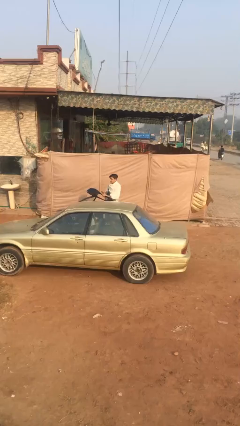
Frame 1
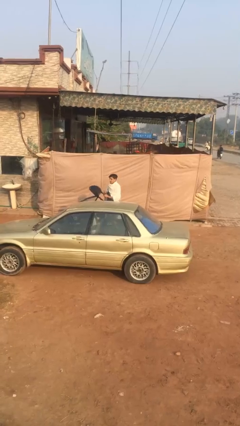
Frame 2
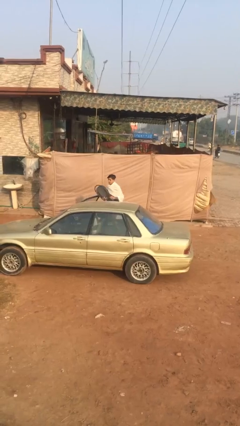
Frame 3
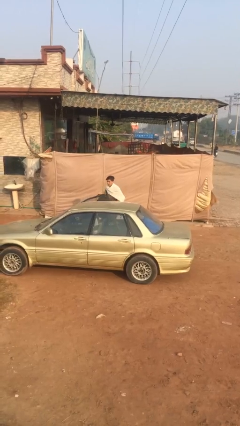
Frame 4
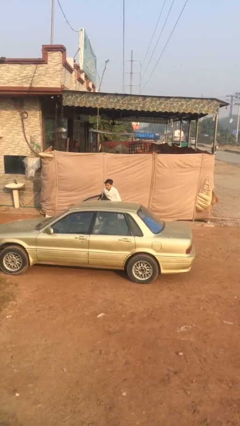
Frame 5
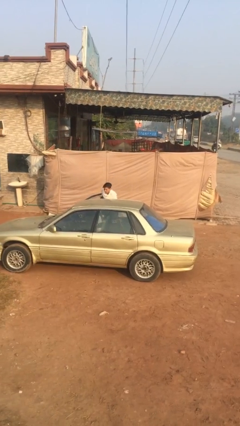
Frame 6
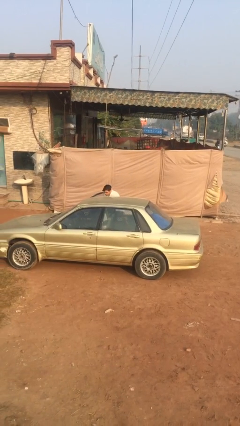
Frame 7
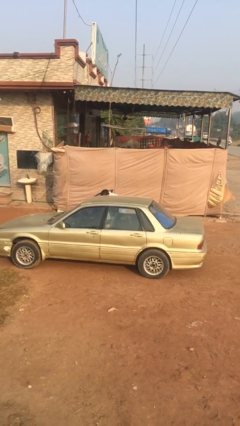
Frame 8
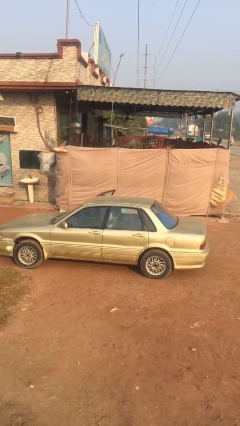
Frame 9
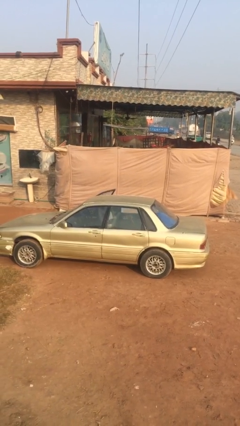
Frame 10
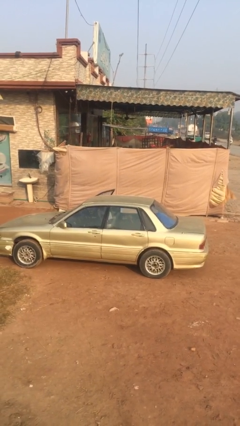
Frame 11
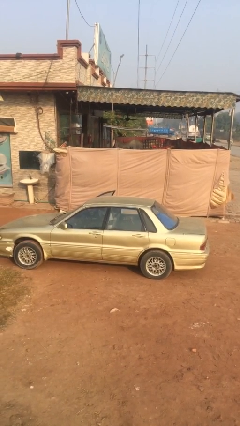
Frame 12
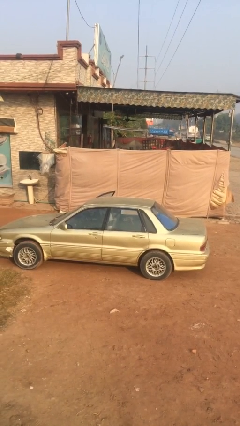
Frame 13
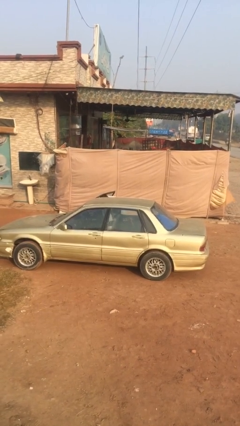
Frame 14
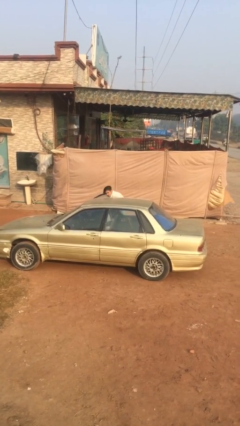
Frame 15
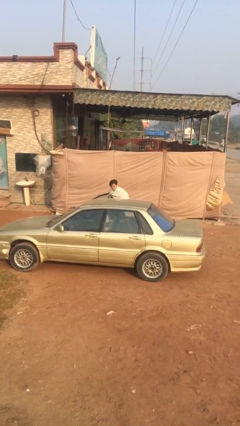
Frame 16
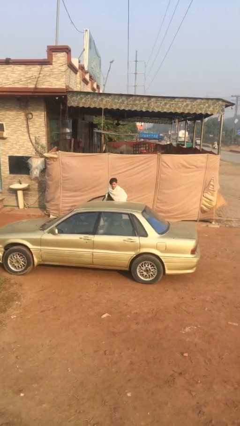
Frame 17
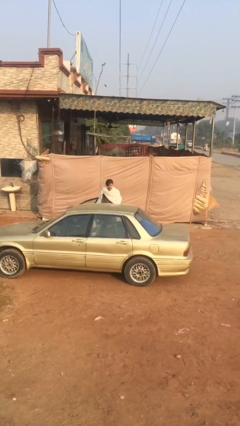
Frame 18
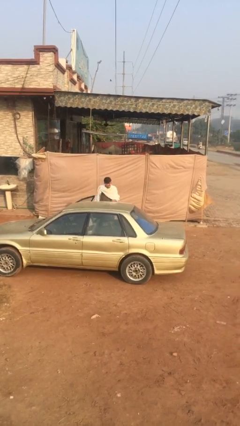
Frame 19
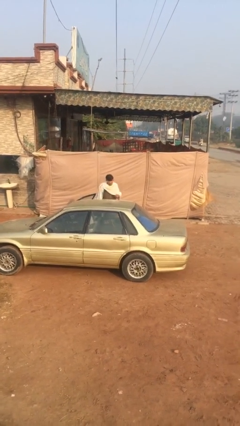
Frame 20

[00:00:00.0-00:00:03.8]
person loads car

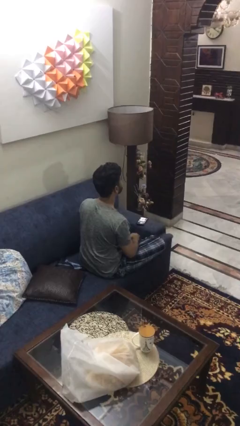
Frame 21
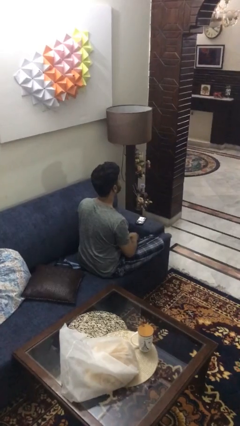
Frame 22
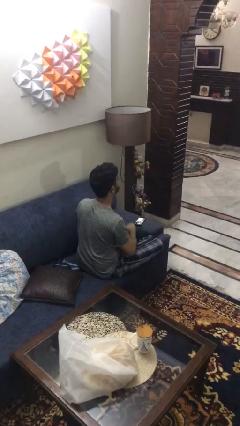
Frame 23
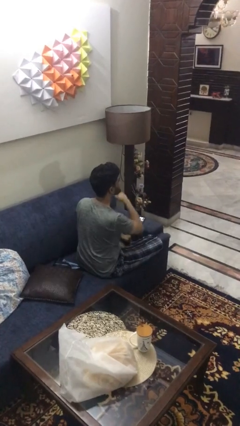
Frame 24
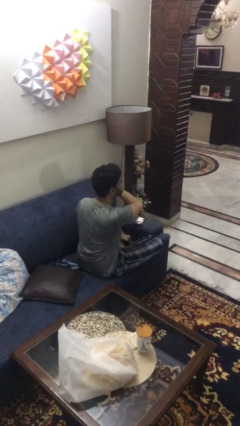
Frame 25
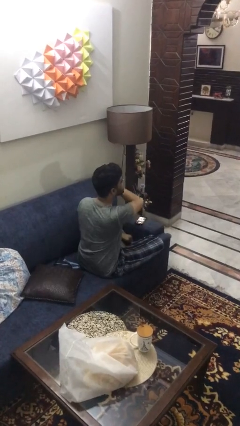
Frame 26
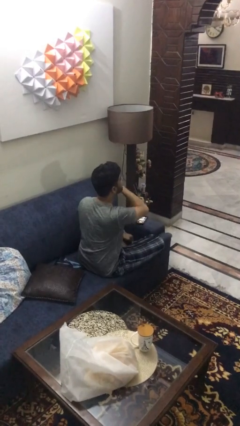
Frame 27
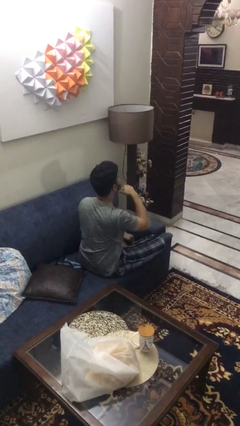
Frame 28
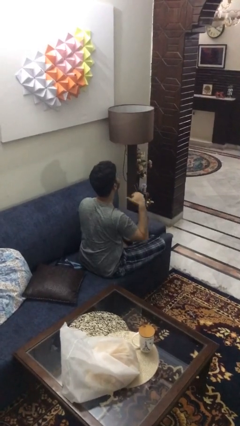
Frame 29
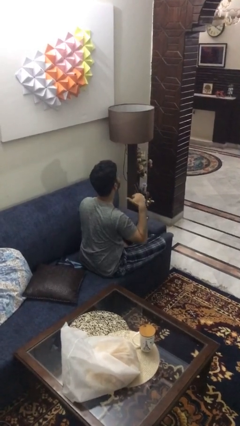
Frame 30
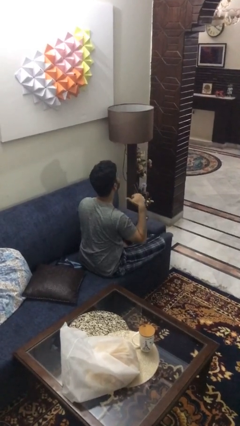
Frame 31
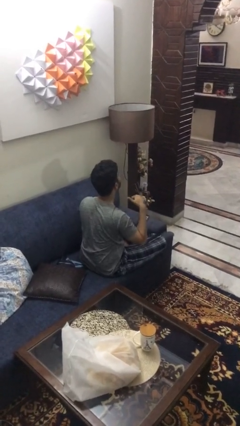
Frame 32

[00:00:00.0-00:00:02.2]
person gestures cut

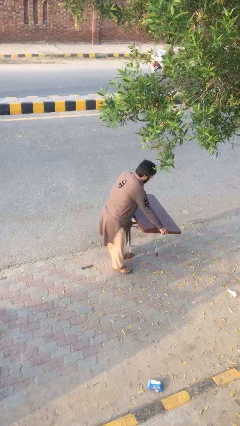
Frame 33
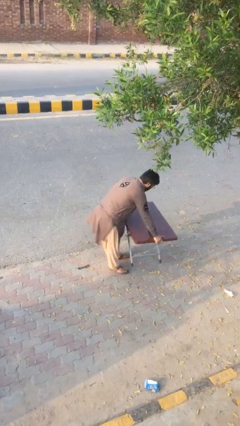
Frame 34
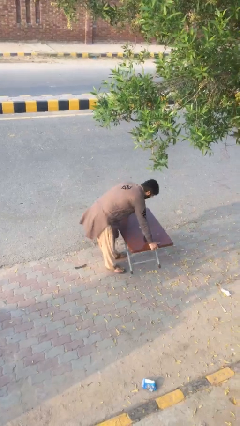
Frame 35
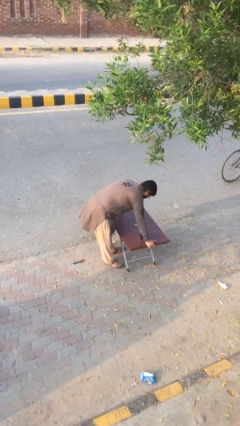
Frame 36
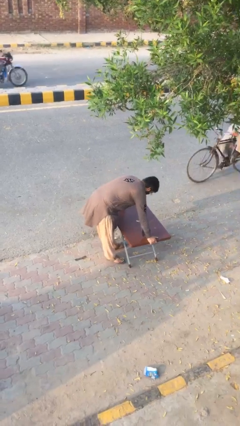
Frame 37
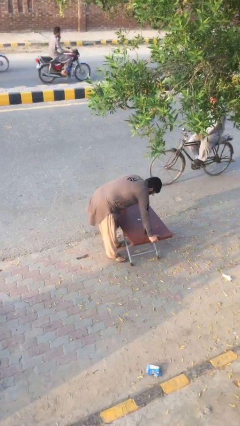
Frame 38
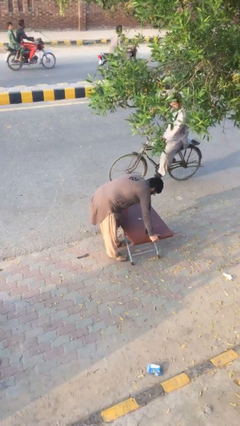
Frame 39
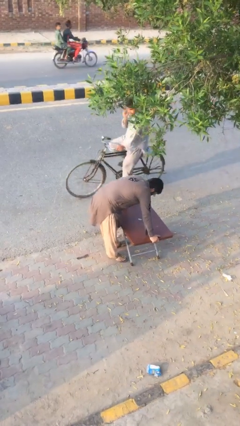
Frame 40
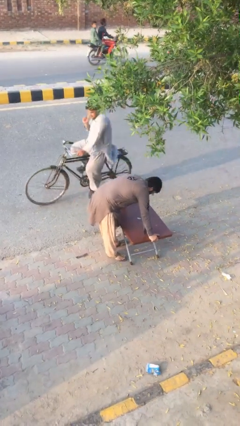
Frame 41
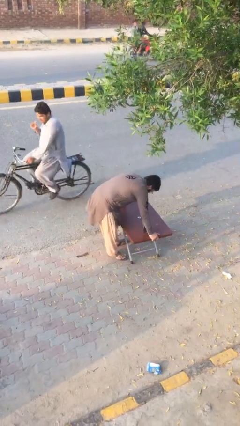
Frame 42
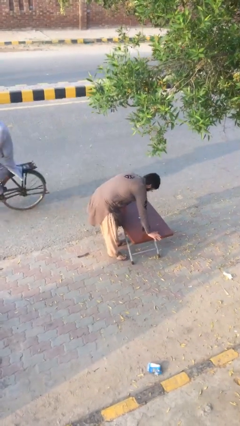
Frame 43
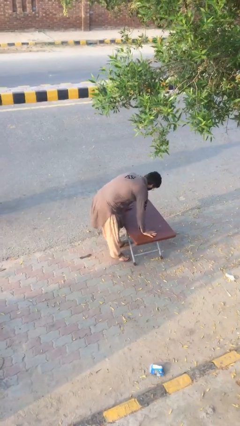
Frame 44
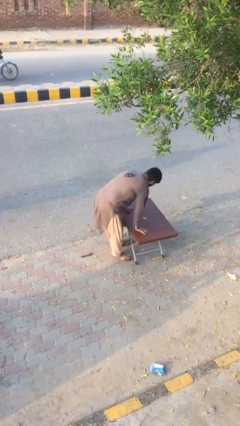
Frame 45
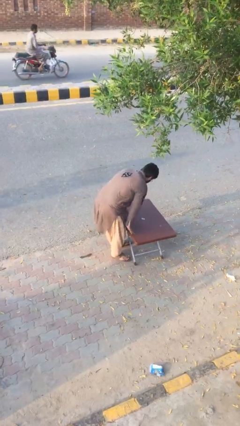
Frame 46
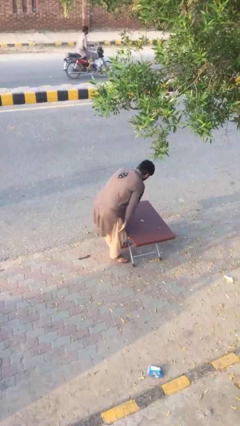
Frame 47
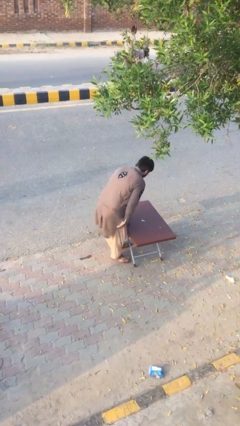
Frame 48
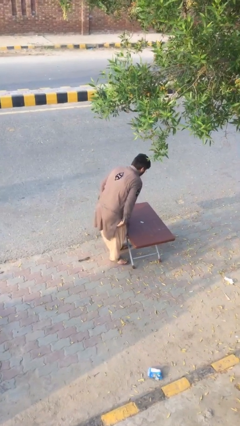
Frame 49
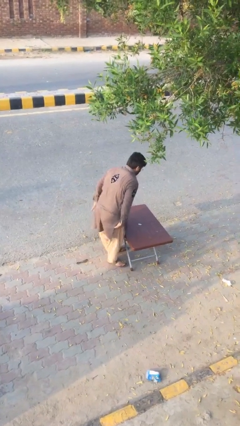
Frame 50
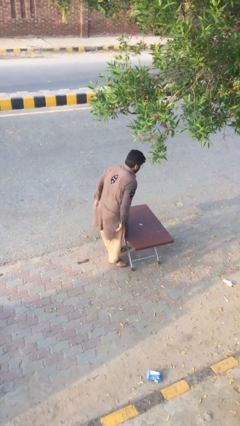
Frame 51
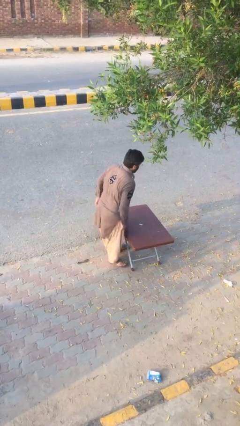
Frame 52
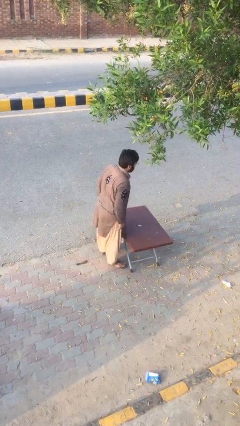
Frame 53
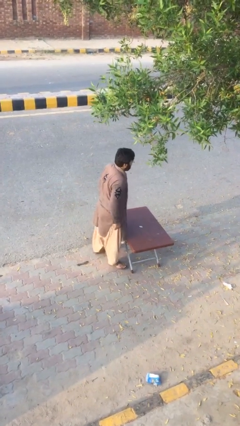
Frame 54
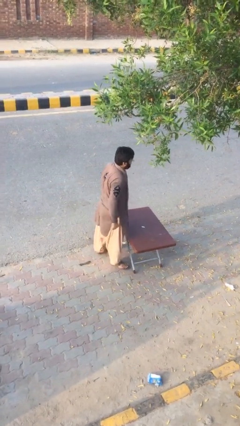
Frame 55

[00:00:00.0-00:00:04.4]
person puts down object on floor

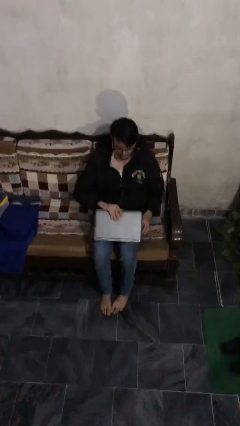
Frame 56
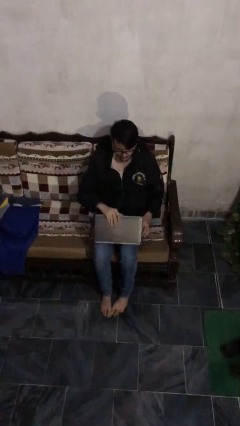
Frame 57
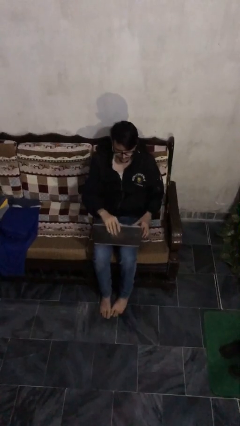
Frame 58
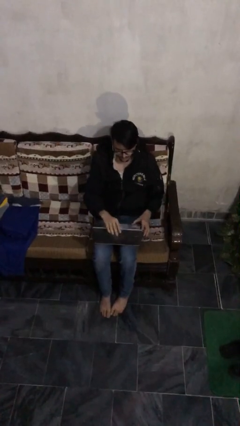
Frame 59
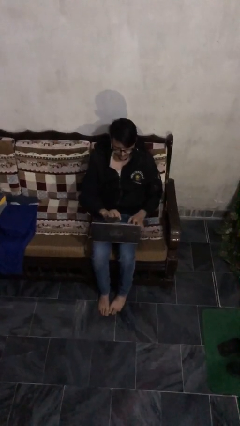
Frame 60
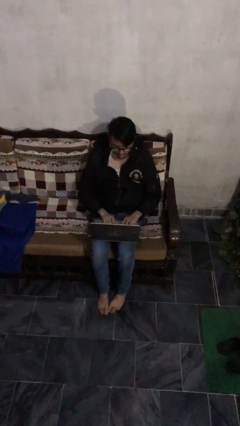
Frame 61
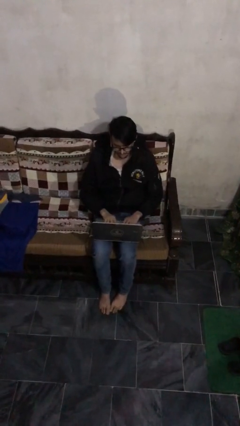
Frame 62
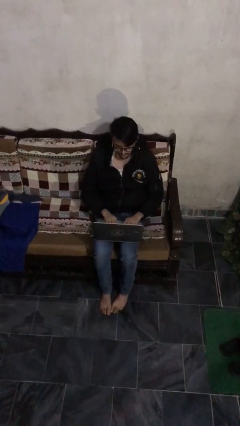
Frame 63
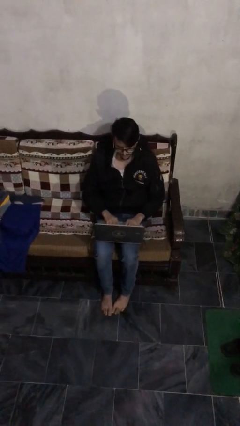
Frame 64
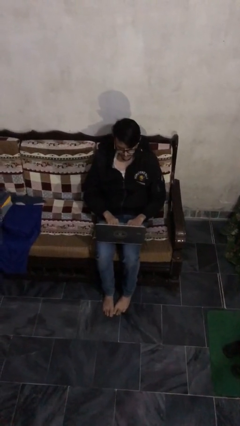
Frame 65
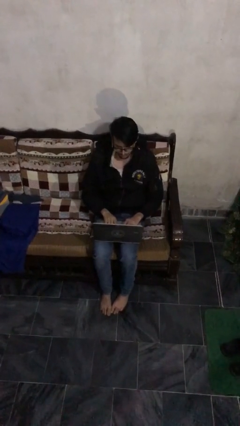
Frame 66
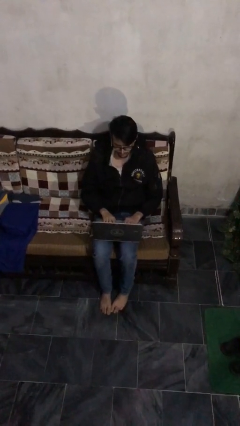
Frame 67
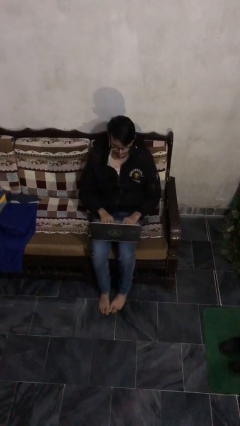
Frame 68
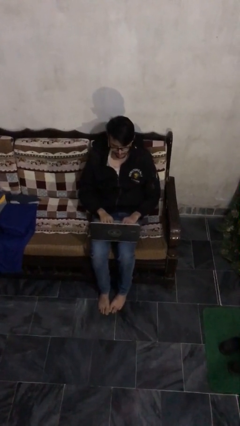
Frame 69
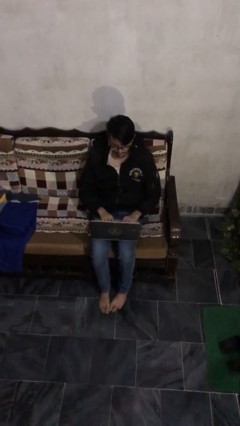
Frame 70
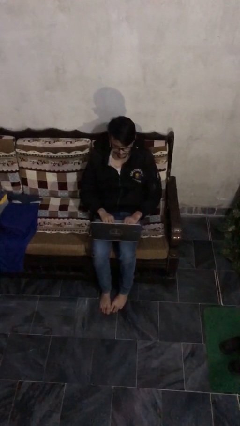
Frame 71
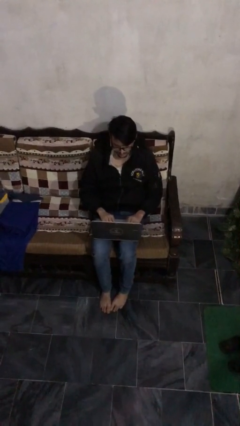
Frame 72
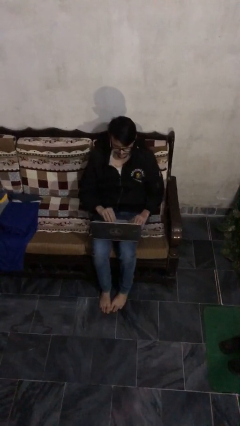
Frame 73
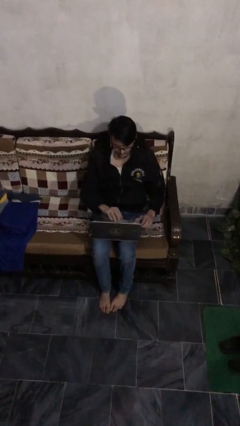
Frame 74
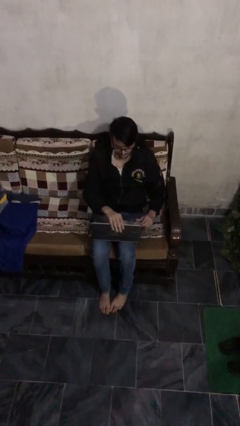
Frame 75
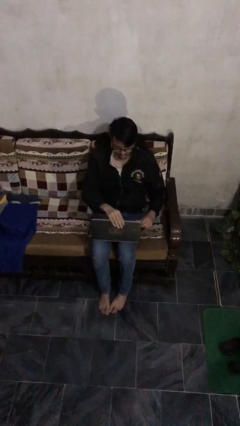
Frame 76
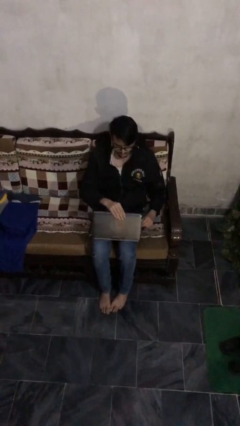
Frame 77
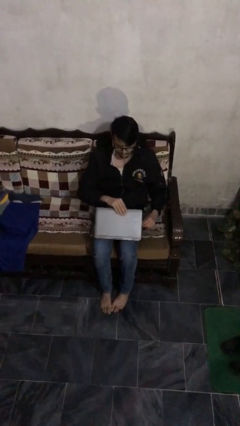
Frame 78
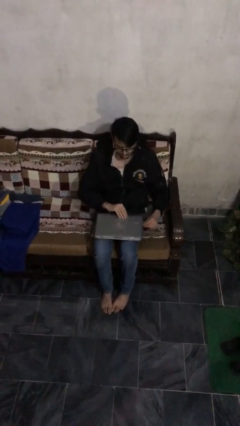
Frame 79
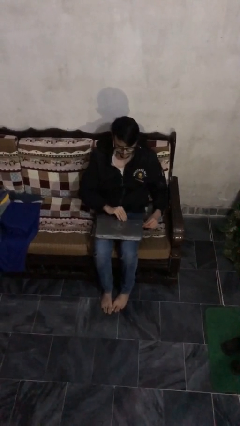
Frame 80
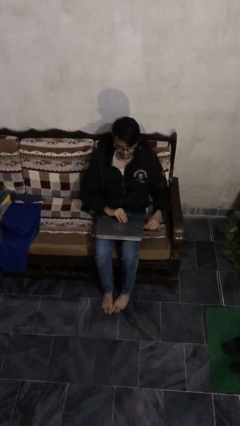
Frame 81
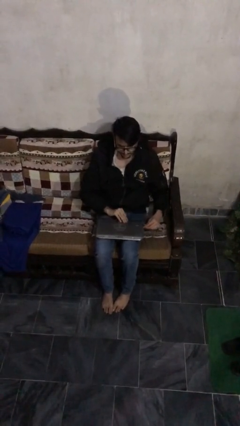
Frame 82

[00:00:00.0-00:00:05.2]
person interacts with laptop

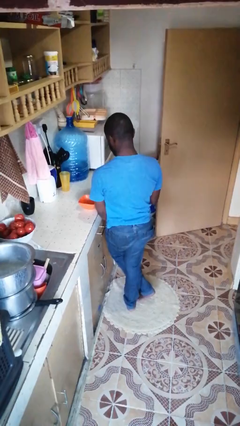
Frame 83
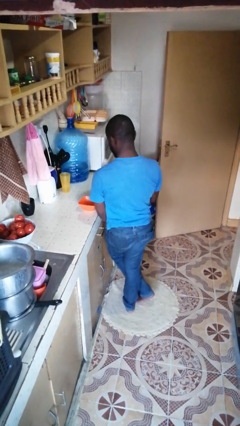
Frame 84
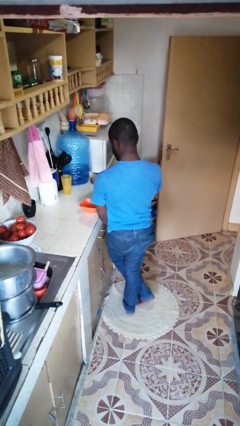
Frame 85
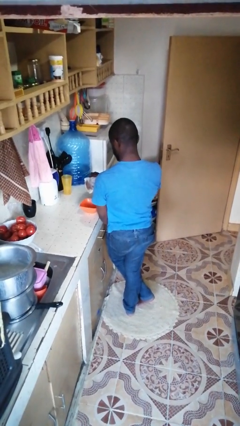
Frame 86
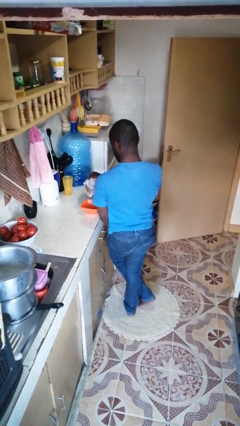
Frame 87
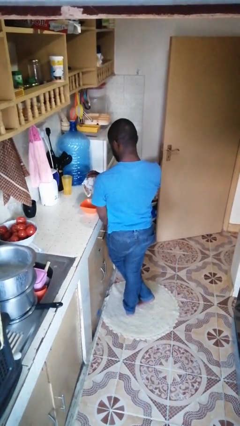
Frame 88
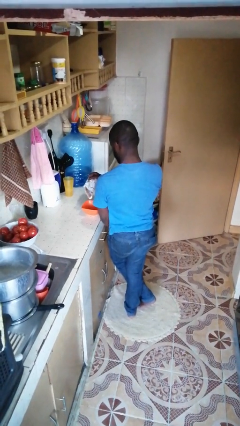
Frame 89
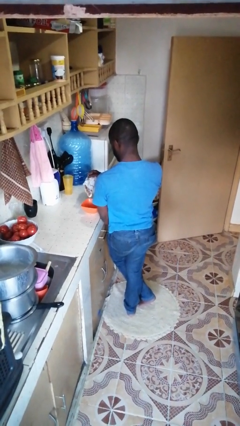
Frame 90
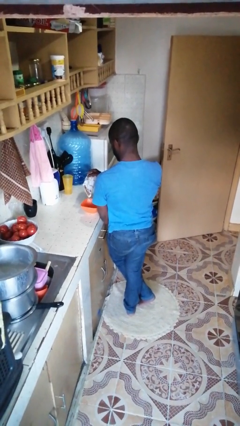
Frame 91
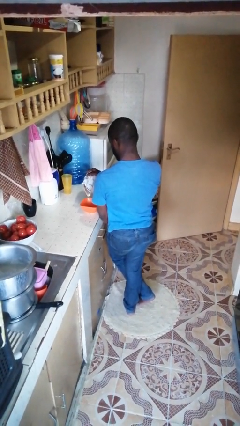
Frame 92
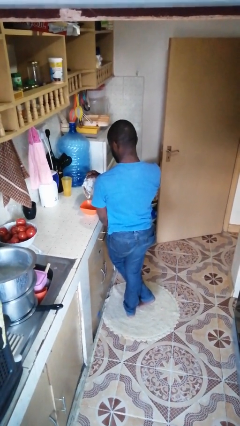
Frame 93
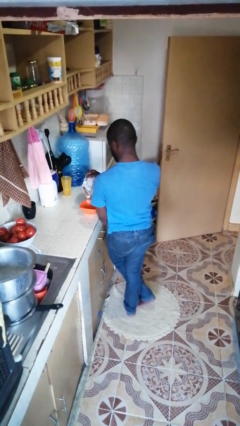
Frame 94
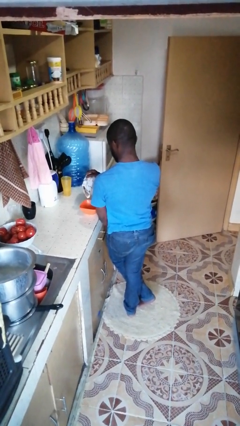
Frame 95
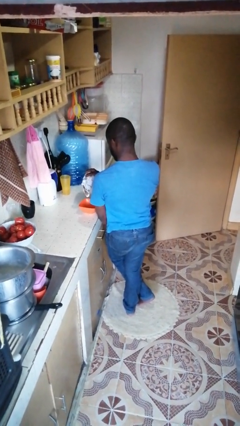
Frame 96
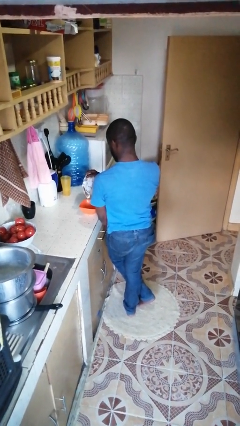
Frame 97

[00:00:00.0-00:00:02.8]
person pours into bowl
